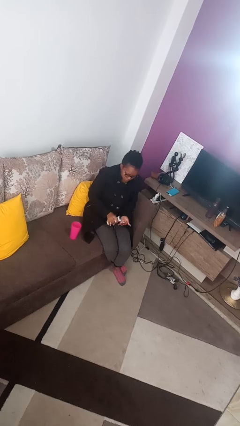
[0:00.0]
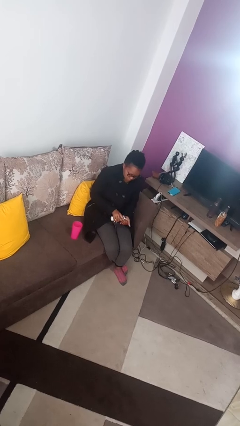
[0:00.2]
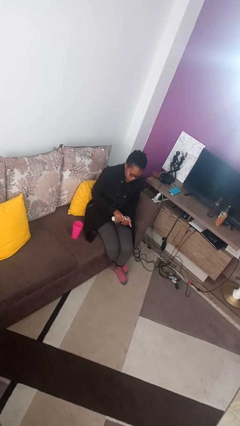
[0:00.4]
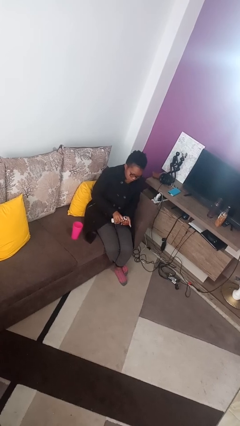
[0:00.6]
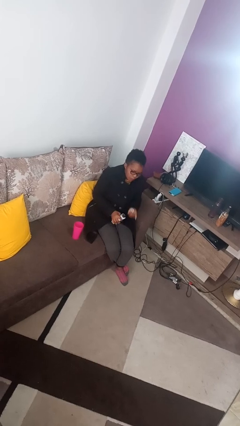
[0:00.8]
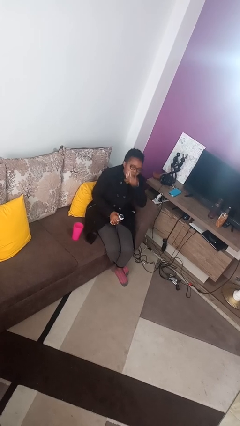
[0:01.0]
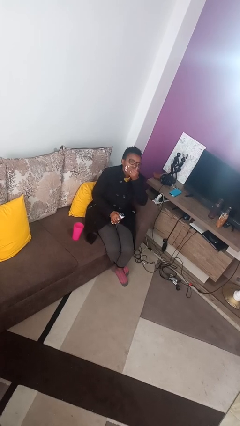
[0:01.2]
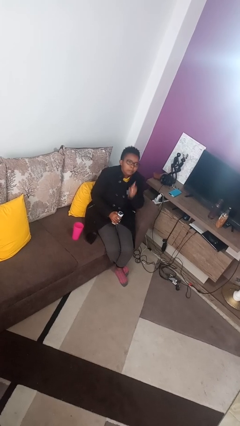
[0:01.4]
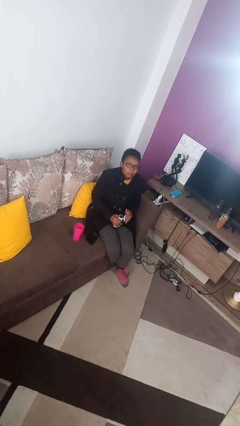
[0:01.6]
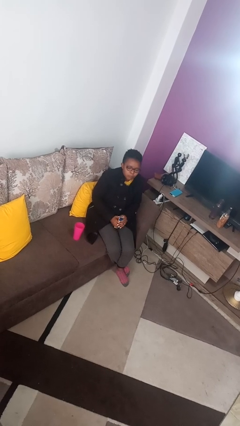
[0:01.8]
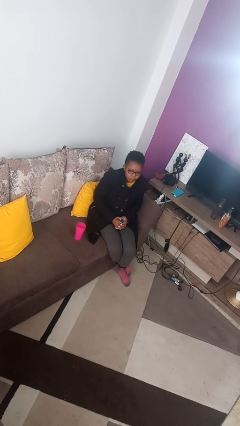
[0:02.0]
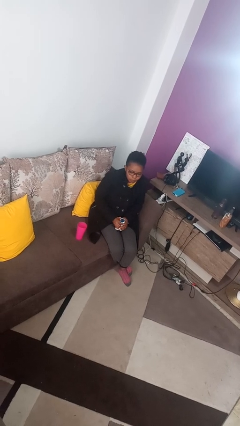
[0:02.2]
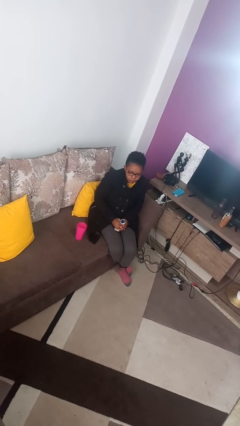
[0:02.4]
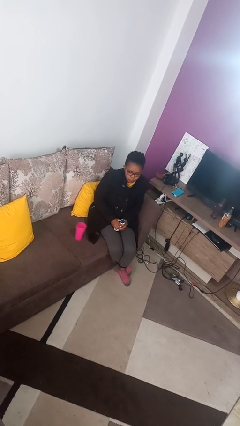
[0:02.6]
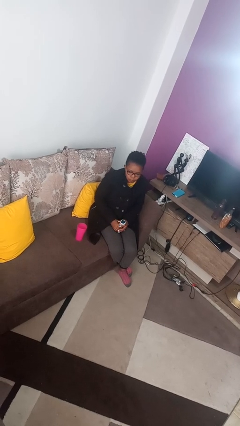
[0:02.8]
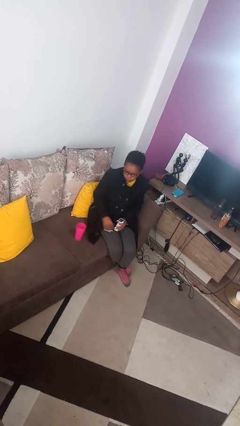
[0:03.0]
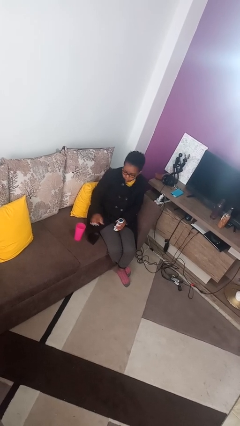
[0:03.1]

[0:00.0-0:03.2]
person takes medicine pills

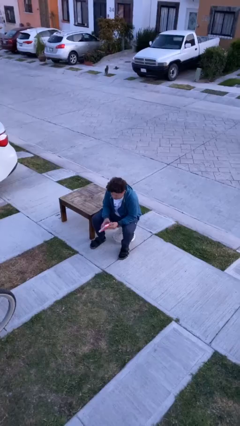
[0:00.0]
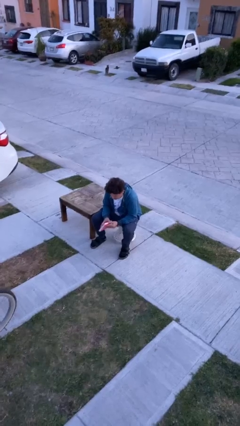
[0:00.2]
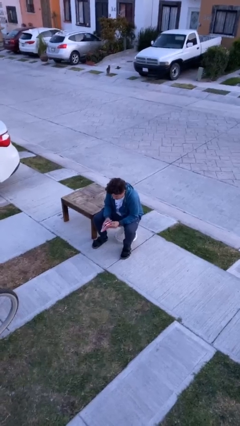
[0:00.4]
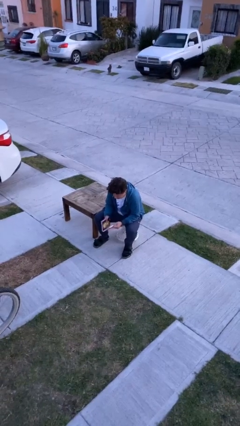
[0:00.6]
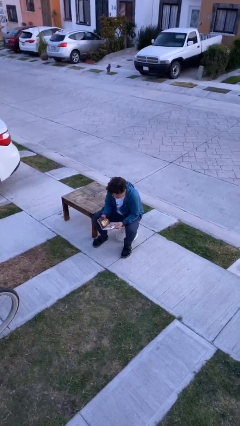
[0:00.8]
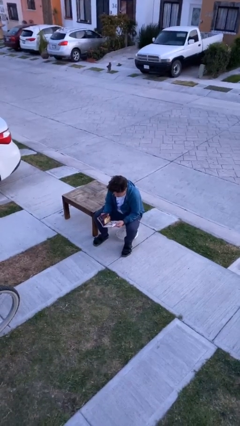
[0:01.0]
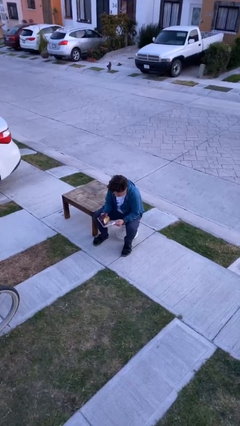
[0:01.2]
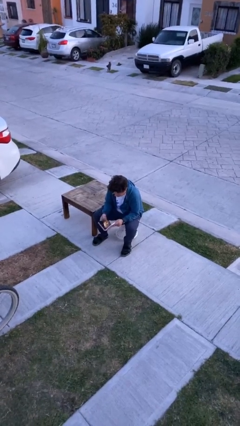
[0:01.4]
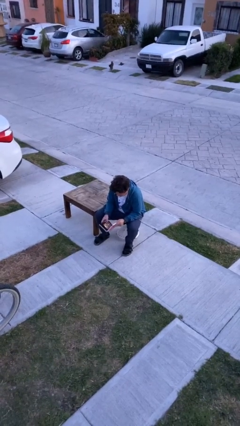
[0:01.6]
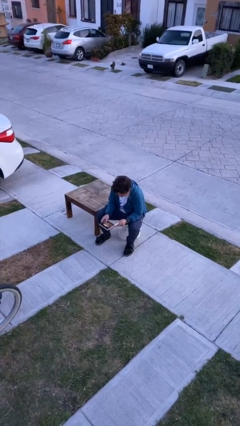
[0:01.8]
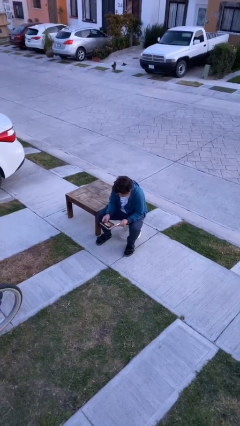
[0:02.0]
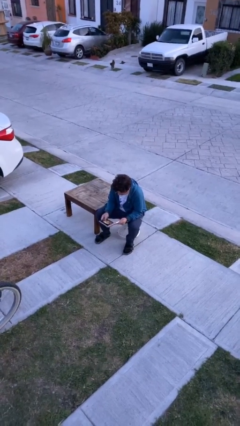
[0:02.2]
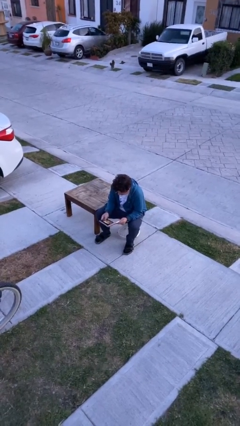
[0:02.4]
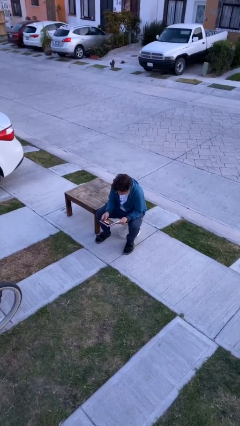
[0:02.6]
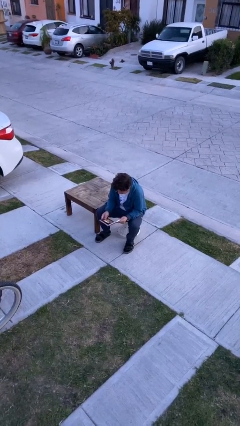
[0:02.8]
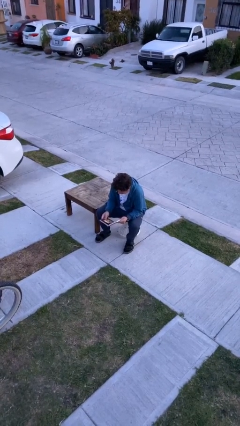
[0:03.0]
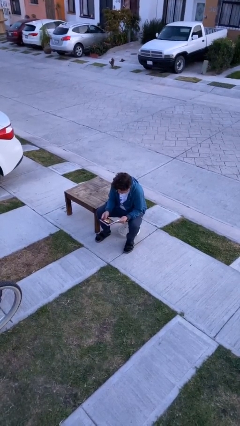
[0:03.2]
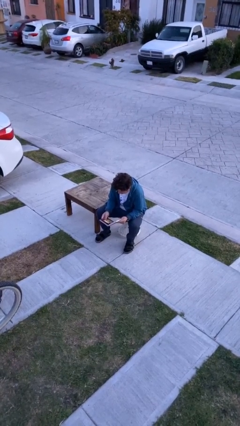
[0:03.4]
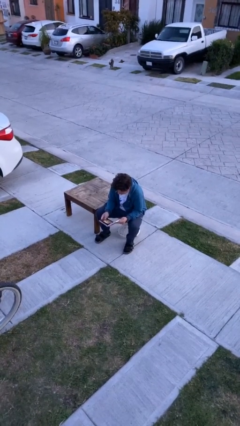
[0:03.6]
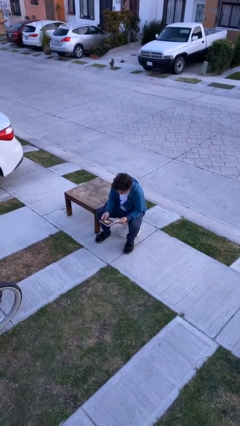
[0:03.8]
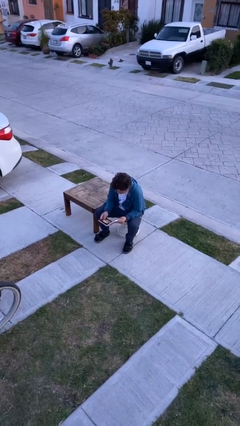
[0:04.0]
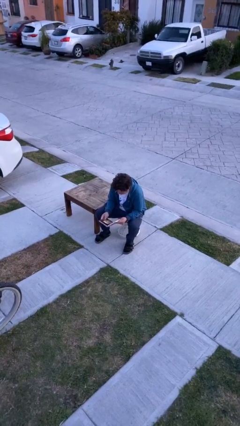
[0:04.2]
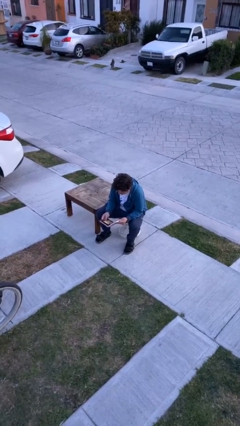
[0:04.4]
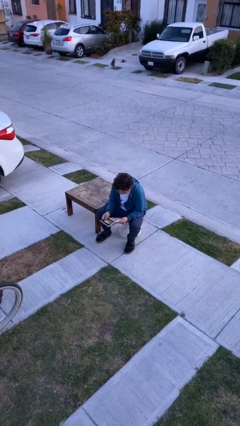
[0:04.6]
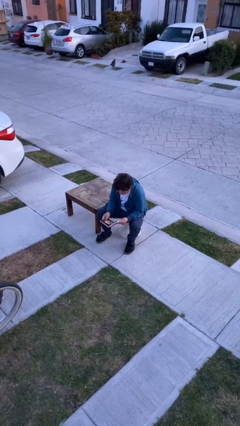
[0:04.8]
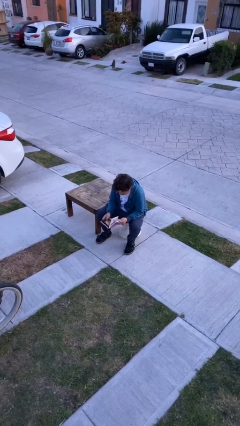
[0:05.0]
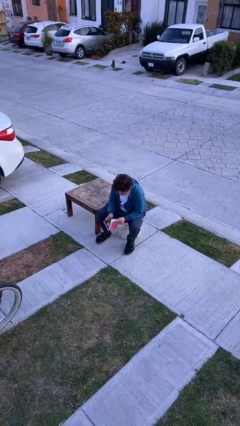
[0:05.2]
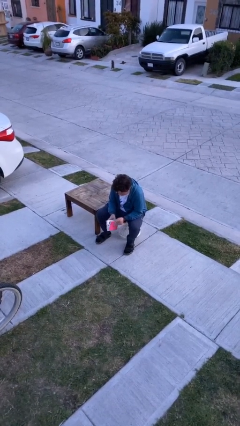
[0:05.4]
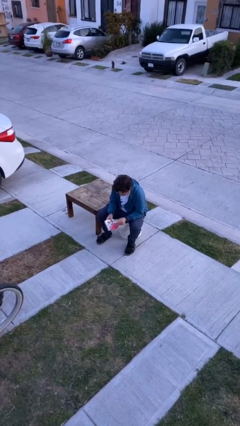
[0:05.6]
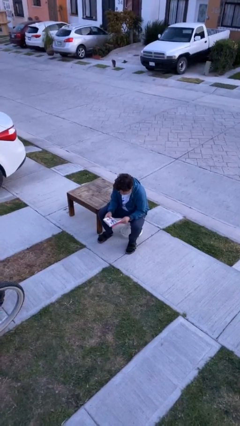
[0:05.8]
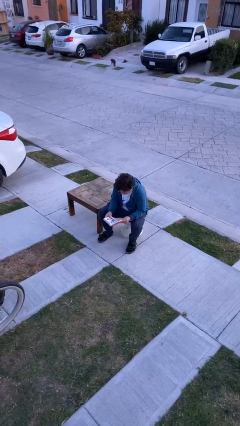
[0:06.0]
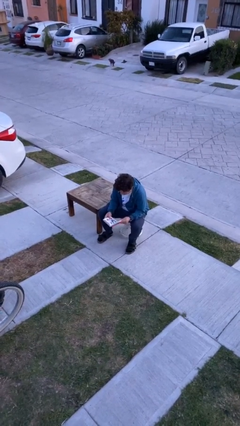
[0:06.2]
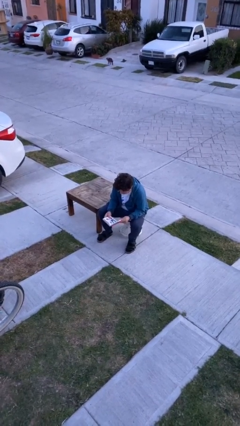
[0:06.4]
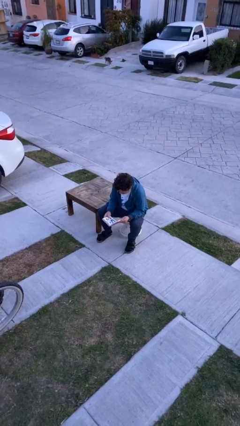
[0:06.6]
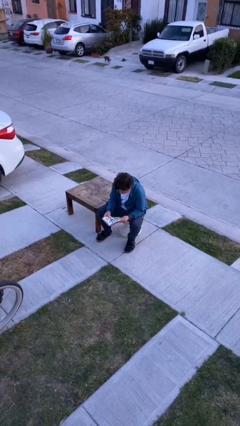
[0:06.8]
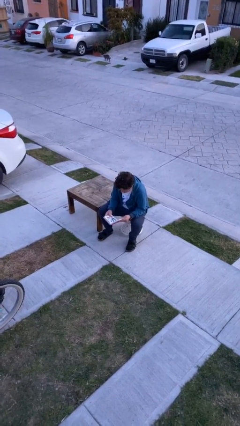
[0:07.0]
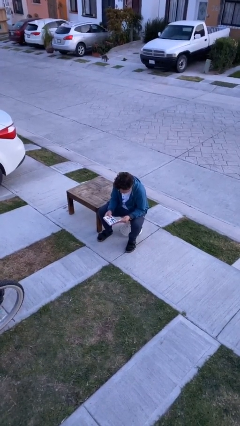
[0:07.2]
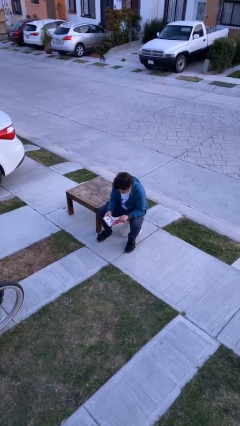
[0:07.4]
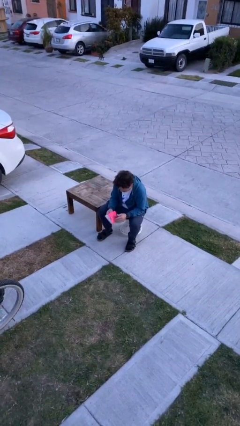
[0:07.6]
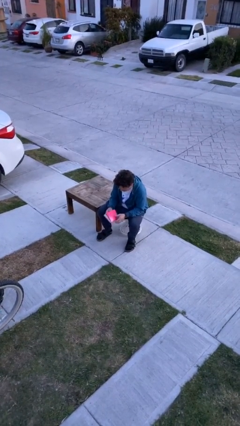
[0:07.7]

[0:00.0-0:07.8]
person reads document

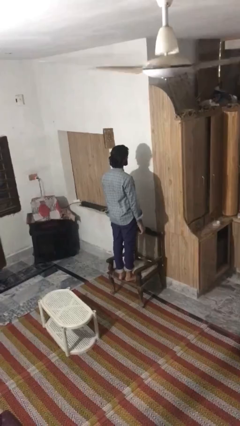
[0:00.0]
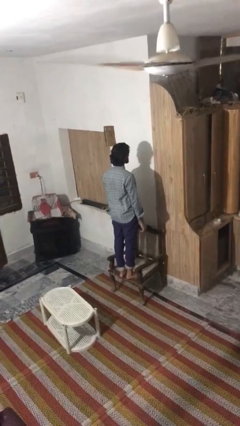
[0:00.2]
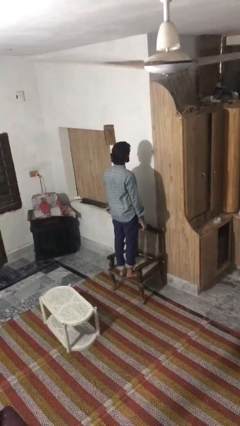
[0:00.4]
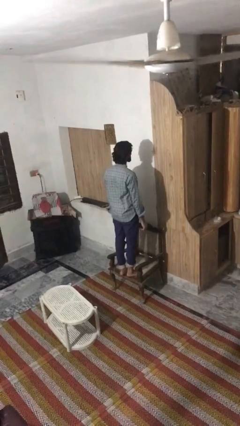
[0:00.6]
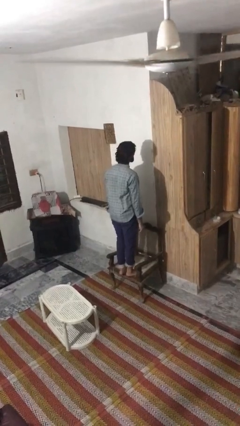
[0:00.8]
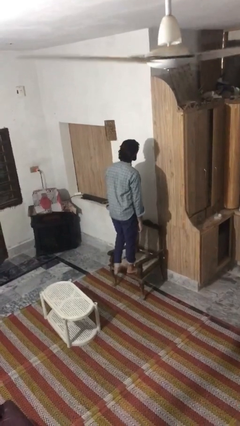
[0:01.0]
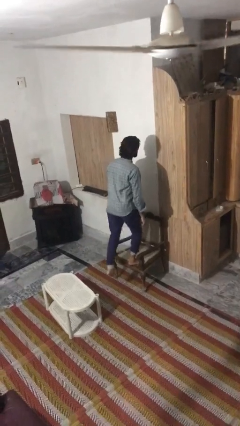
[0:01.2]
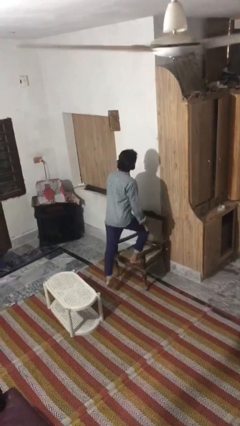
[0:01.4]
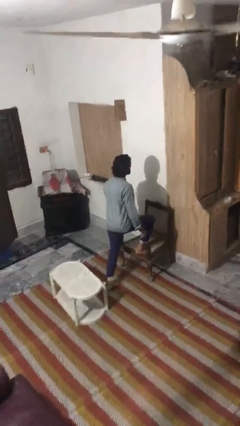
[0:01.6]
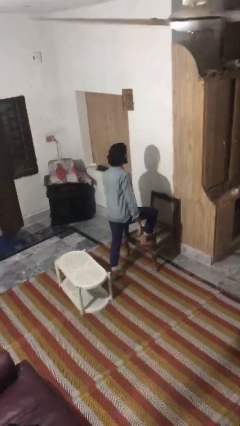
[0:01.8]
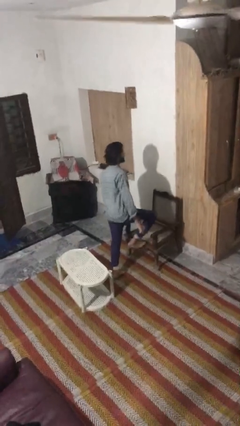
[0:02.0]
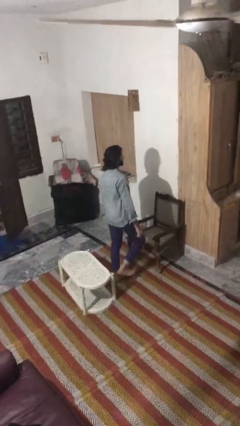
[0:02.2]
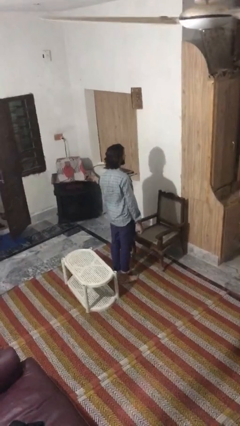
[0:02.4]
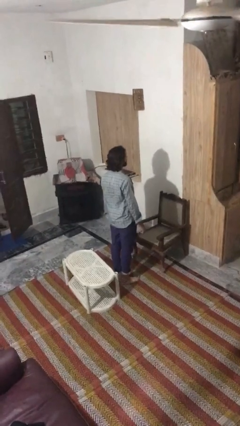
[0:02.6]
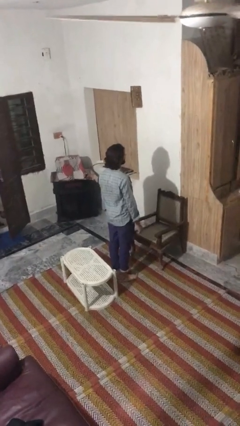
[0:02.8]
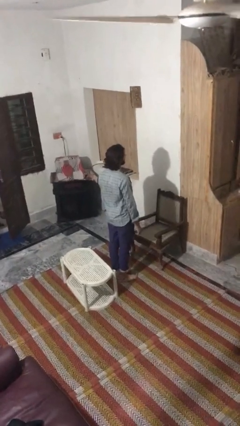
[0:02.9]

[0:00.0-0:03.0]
person climbs off chair

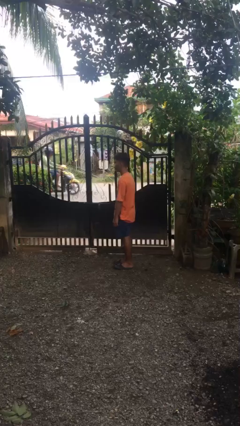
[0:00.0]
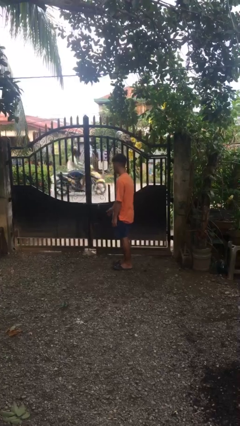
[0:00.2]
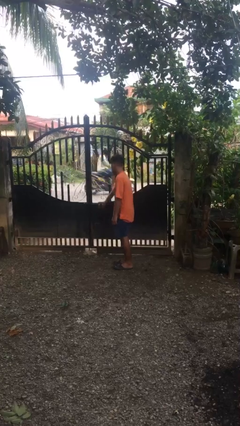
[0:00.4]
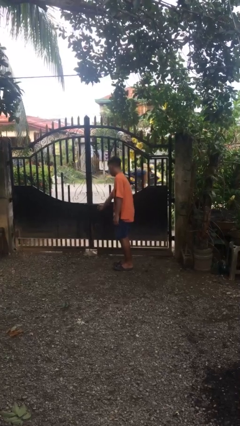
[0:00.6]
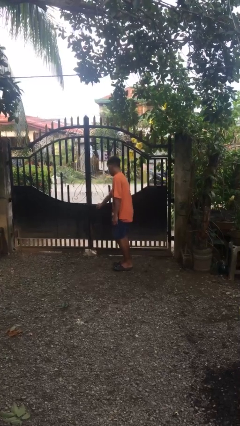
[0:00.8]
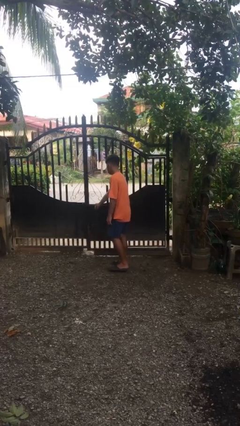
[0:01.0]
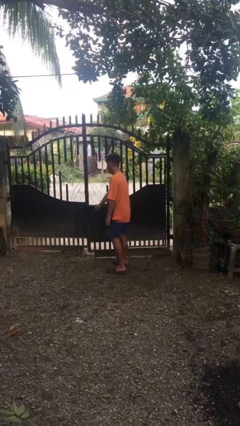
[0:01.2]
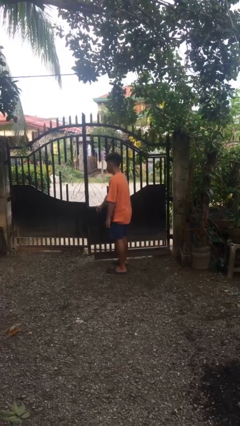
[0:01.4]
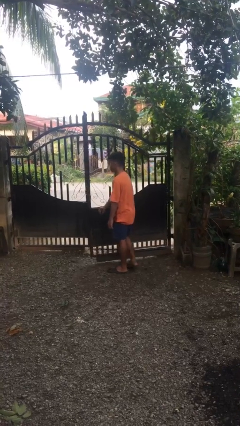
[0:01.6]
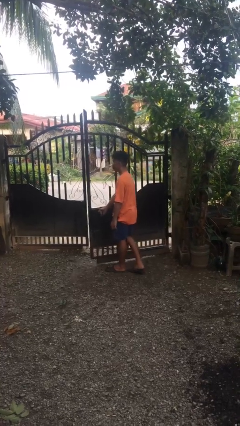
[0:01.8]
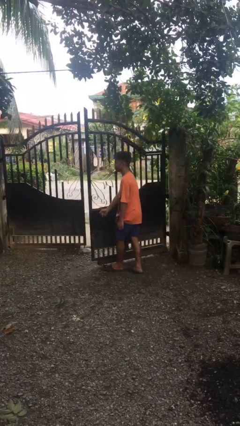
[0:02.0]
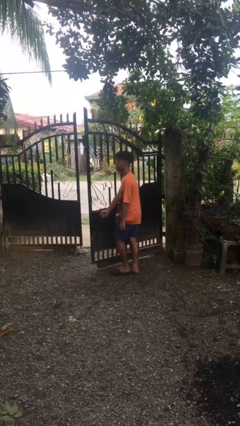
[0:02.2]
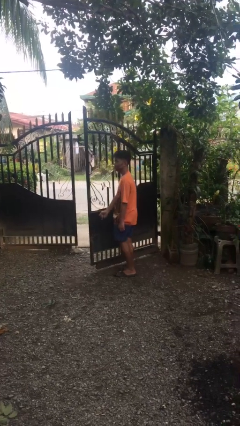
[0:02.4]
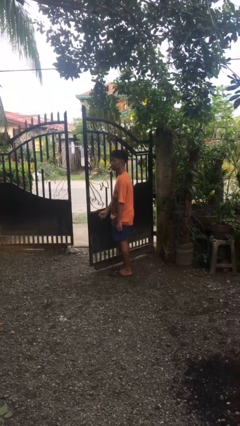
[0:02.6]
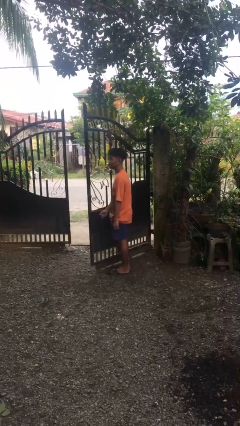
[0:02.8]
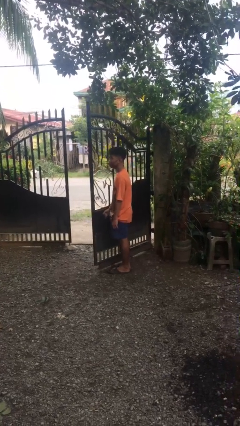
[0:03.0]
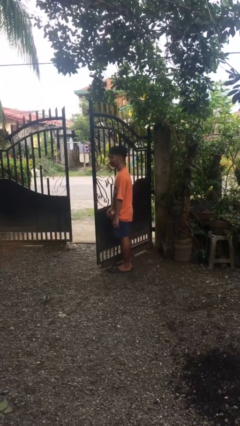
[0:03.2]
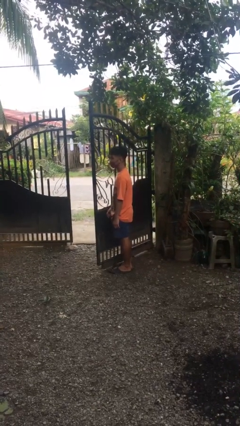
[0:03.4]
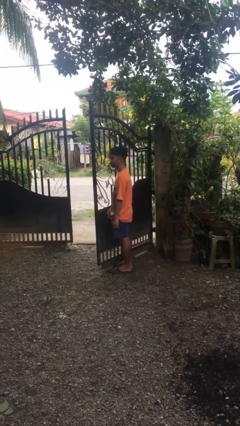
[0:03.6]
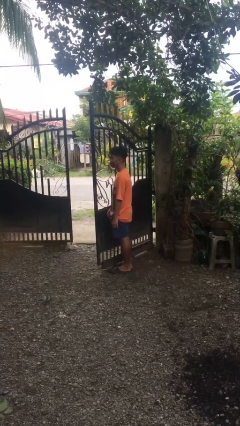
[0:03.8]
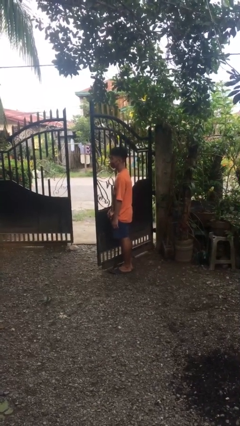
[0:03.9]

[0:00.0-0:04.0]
person opens gate
